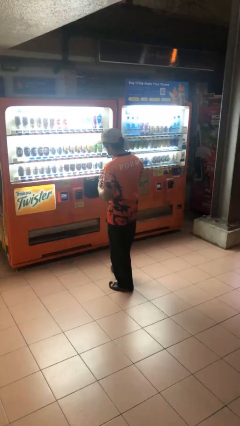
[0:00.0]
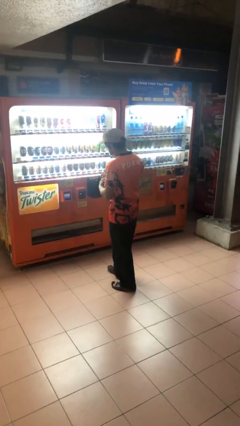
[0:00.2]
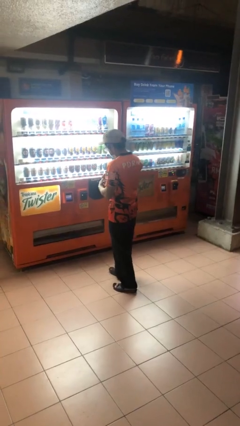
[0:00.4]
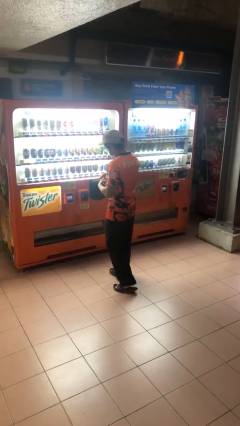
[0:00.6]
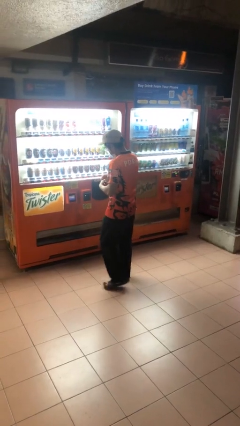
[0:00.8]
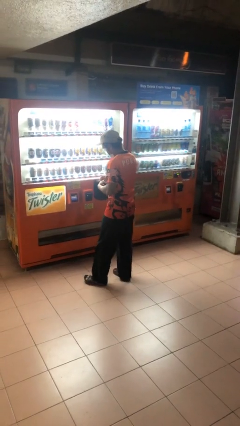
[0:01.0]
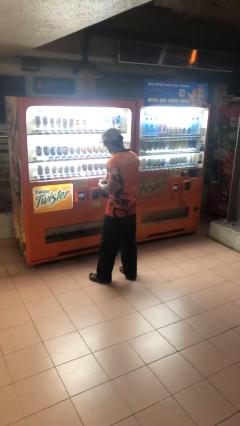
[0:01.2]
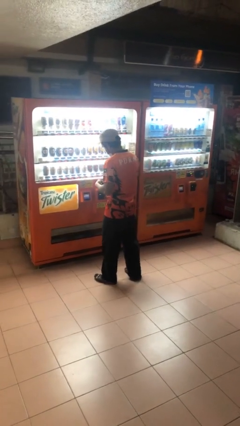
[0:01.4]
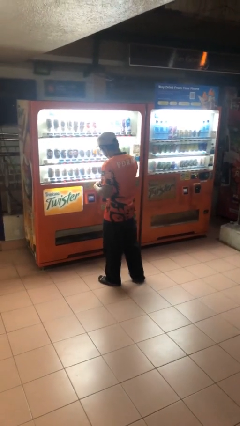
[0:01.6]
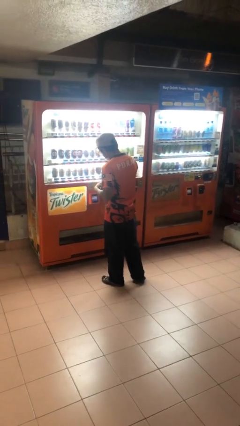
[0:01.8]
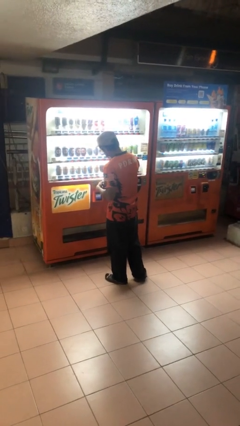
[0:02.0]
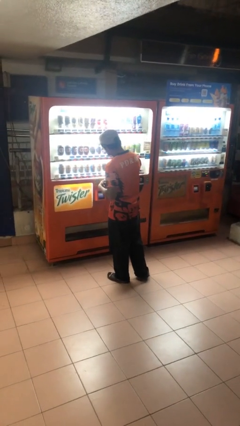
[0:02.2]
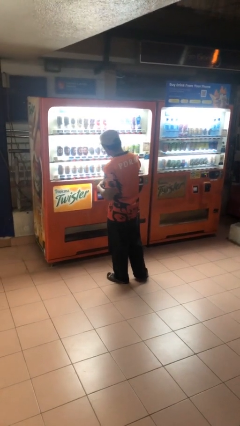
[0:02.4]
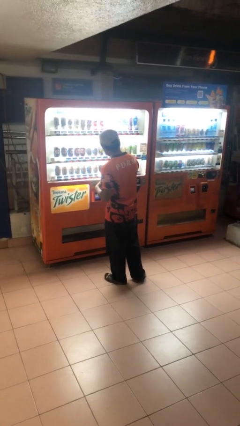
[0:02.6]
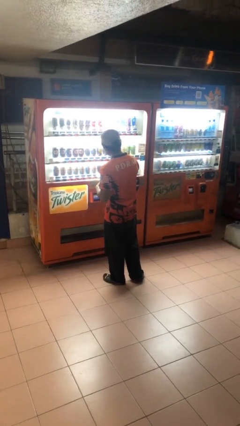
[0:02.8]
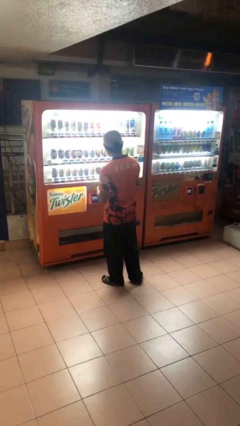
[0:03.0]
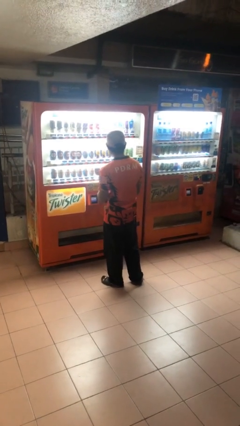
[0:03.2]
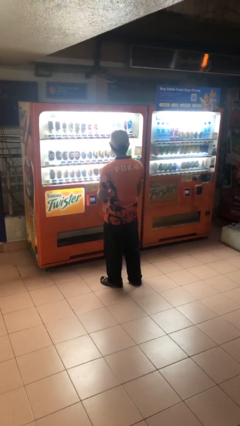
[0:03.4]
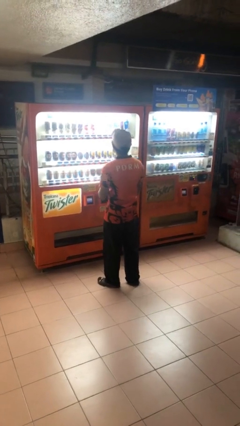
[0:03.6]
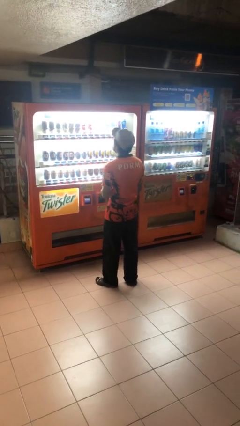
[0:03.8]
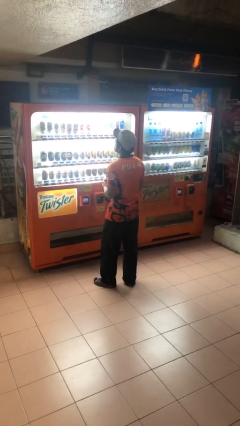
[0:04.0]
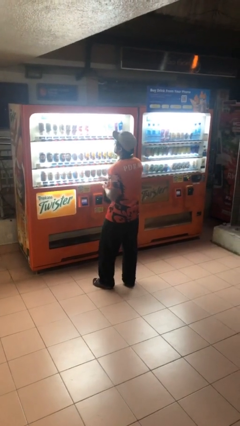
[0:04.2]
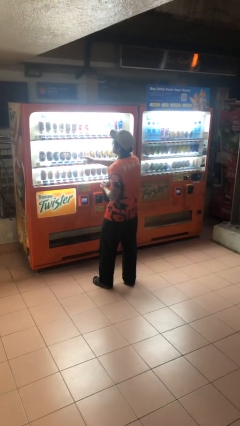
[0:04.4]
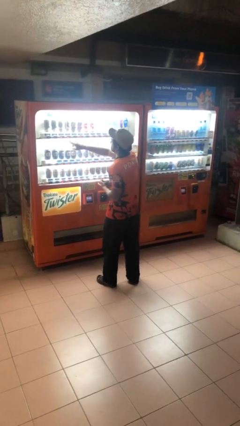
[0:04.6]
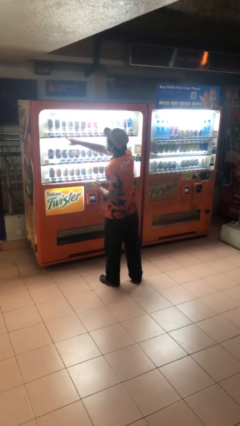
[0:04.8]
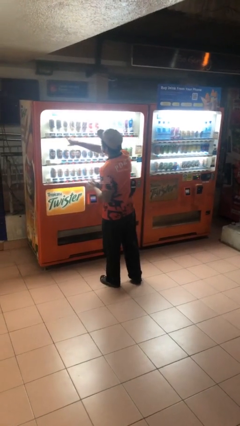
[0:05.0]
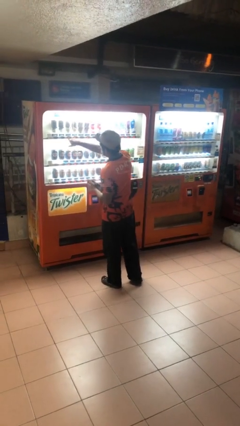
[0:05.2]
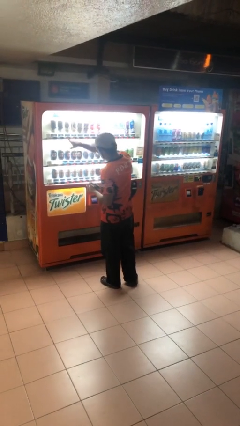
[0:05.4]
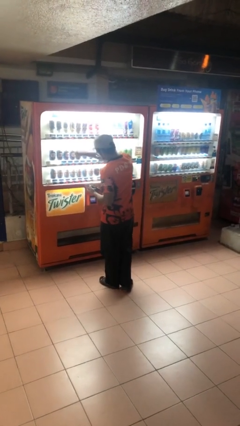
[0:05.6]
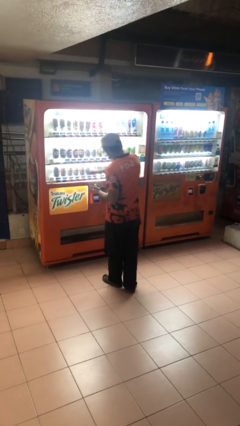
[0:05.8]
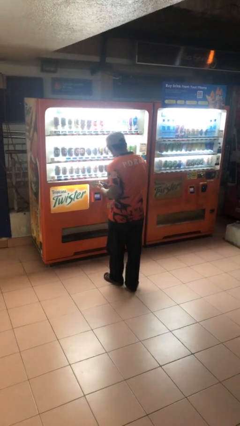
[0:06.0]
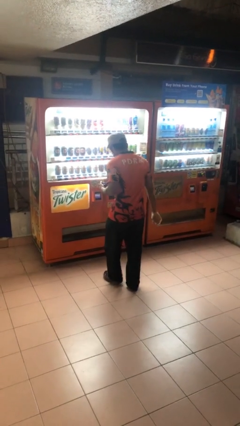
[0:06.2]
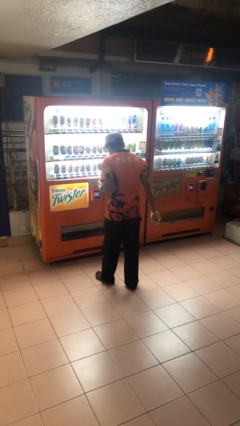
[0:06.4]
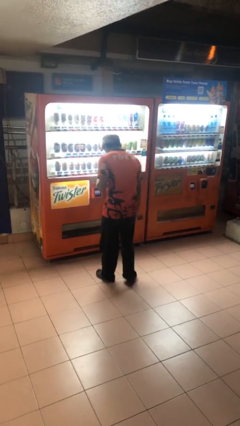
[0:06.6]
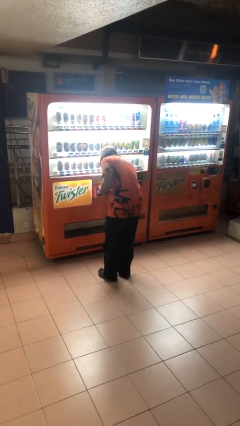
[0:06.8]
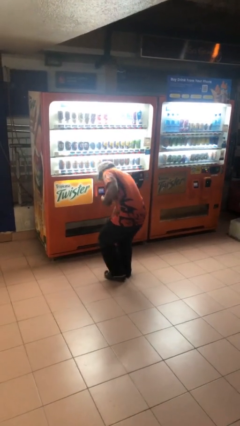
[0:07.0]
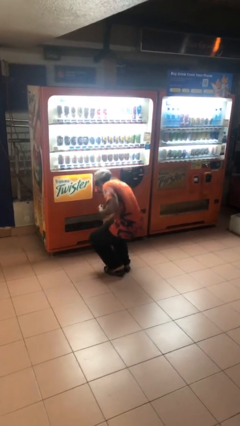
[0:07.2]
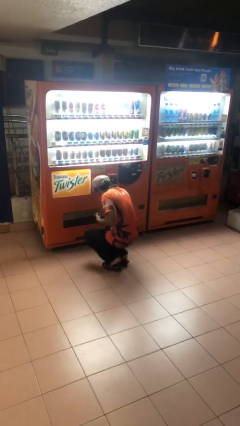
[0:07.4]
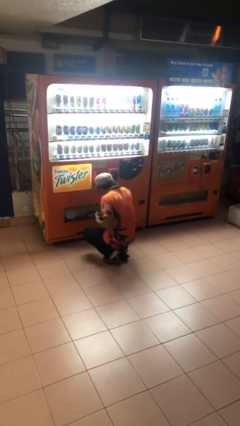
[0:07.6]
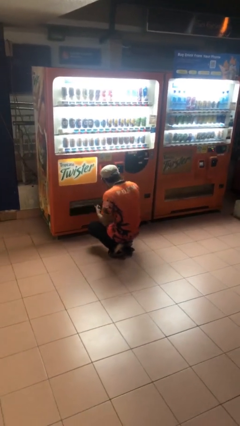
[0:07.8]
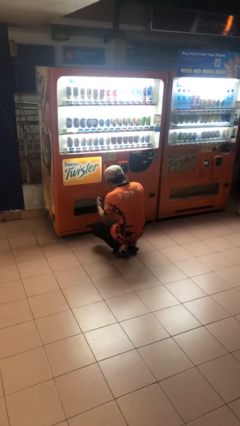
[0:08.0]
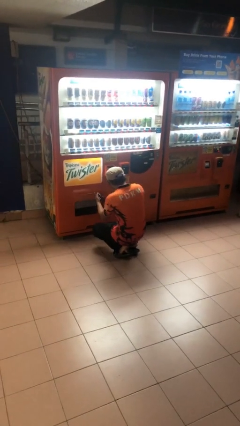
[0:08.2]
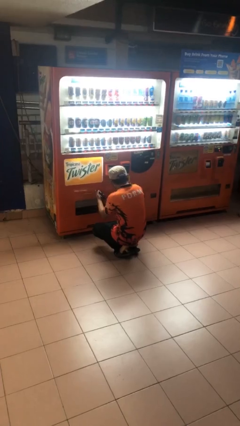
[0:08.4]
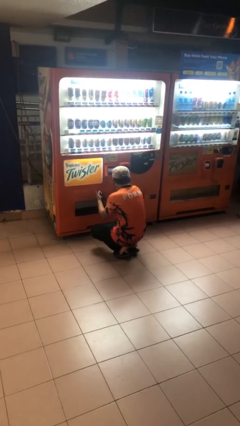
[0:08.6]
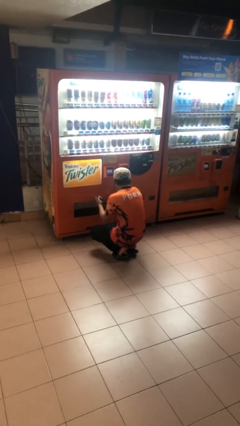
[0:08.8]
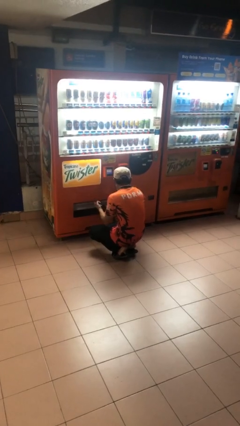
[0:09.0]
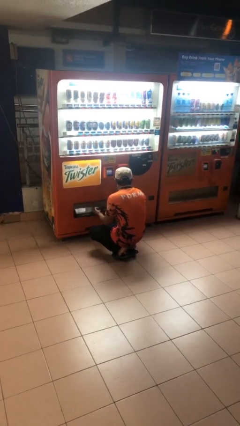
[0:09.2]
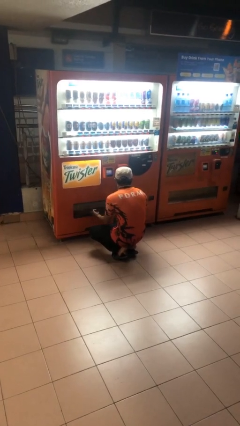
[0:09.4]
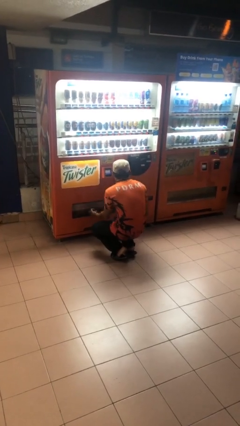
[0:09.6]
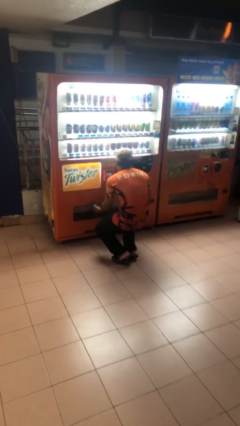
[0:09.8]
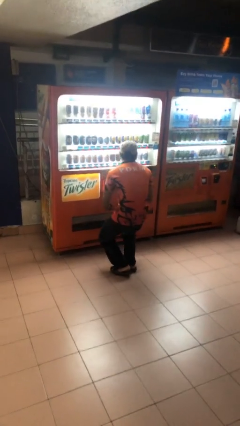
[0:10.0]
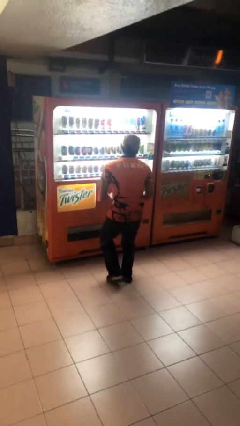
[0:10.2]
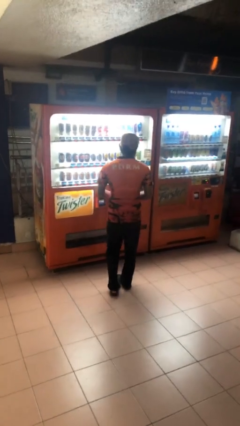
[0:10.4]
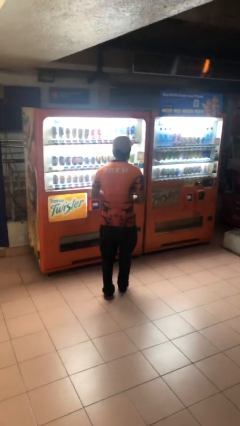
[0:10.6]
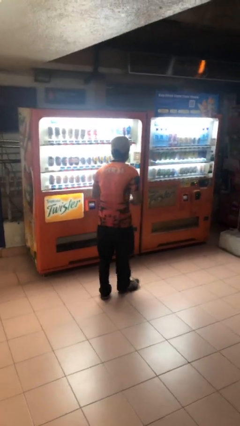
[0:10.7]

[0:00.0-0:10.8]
person purchases from machine

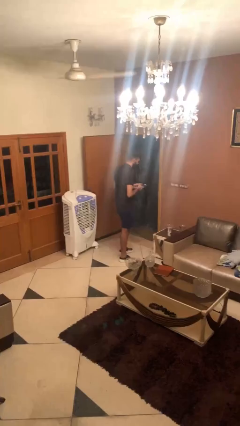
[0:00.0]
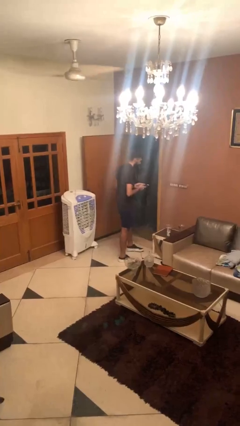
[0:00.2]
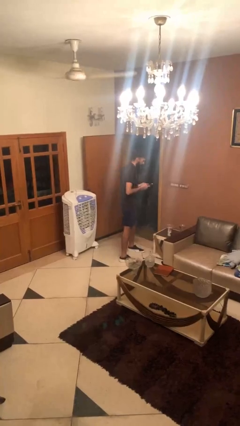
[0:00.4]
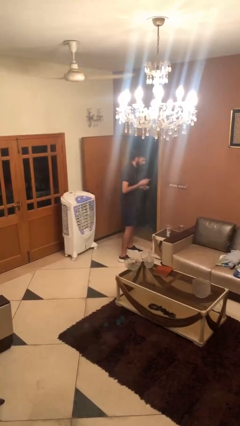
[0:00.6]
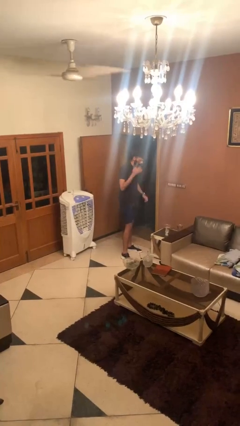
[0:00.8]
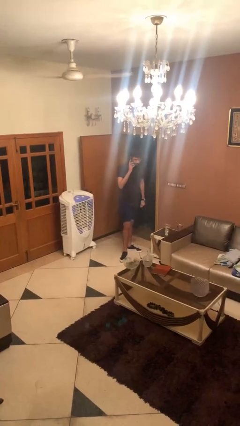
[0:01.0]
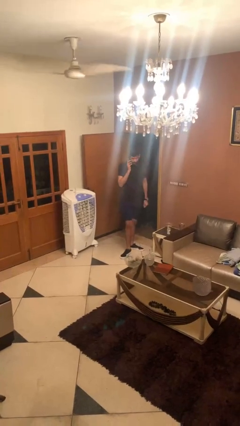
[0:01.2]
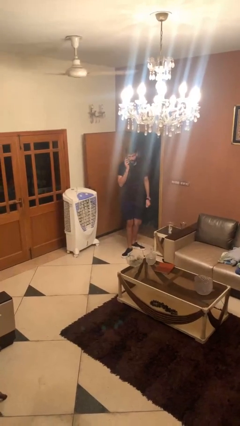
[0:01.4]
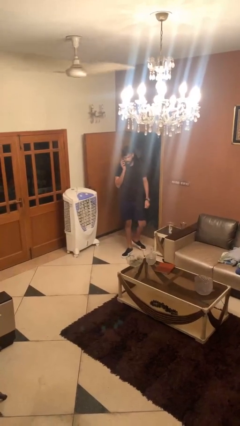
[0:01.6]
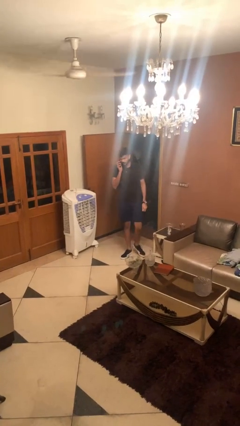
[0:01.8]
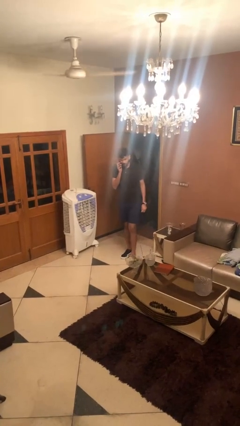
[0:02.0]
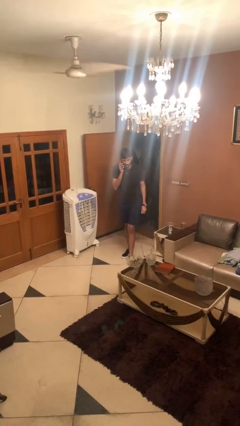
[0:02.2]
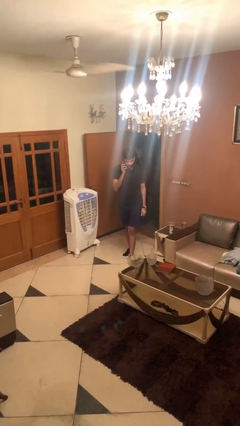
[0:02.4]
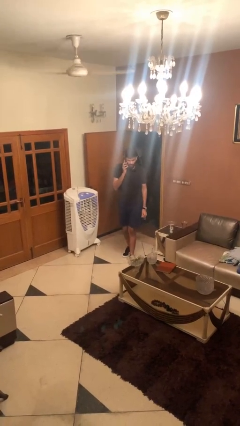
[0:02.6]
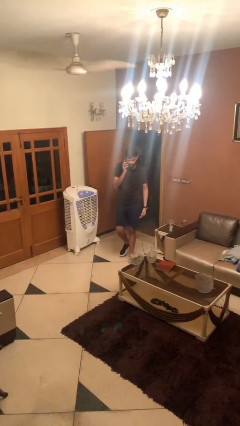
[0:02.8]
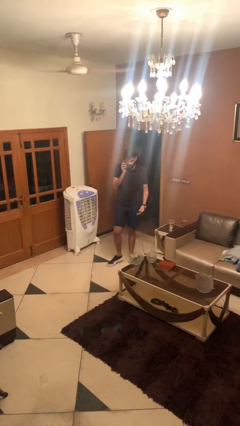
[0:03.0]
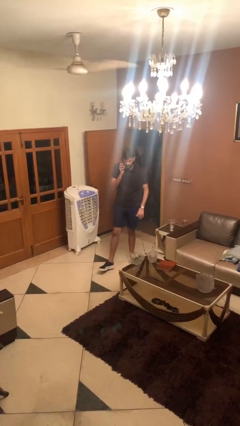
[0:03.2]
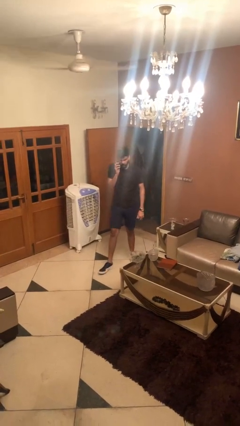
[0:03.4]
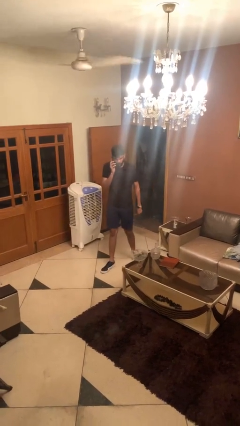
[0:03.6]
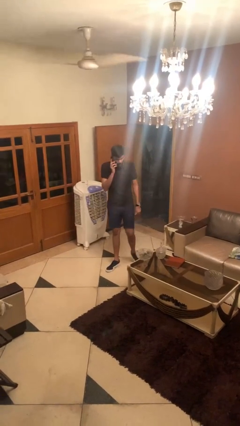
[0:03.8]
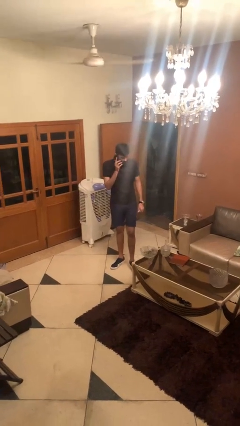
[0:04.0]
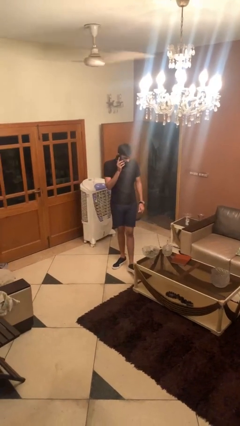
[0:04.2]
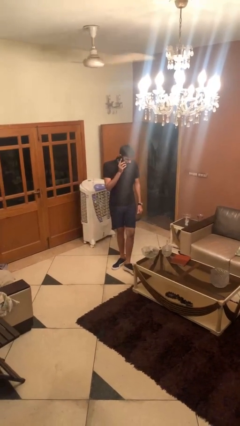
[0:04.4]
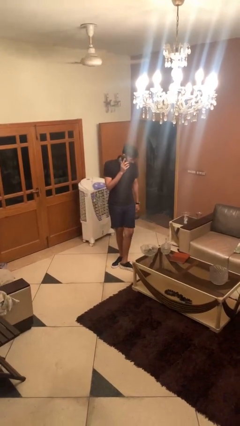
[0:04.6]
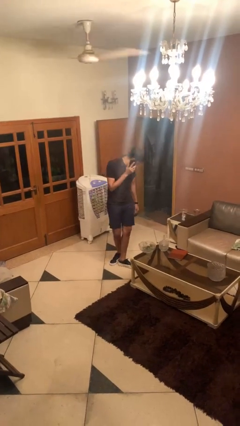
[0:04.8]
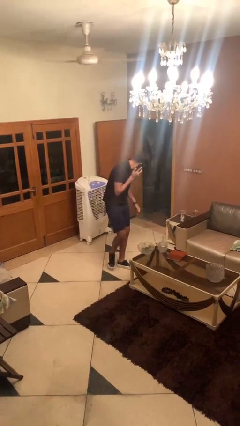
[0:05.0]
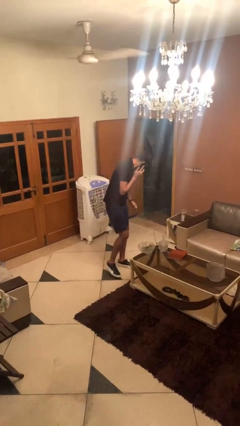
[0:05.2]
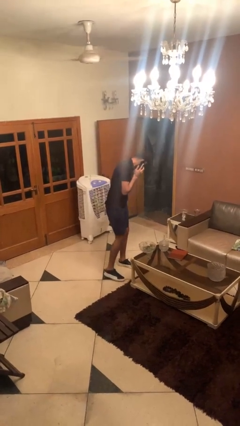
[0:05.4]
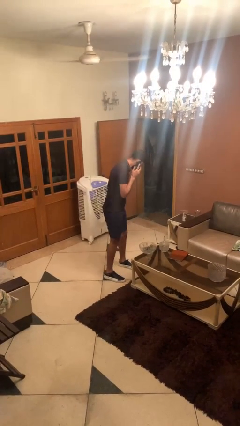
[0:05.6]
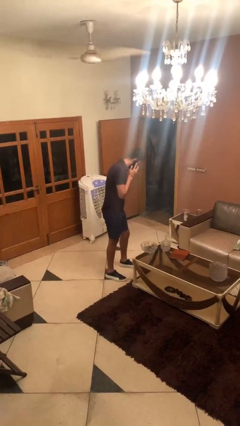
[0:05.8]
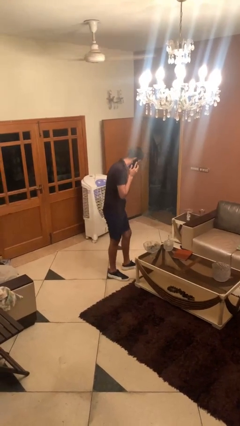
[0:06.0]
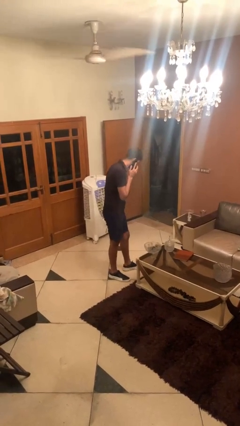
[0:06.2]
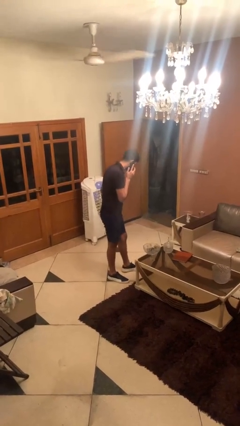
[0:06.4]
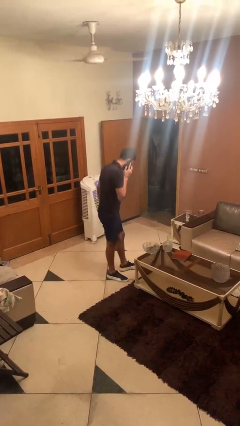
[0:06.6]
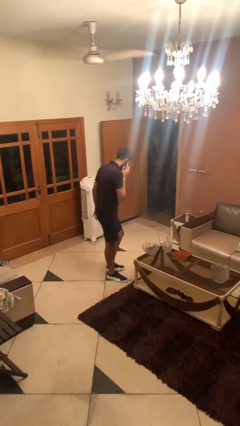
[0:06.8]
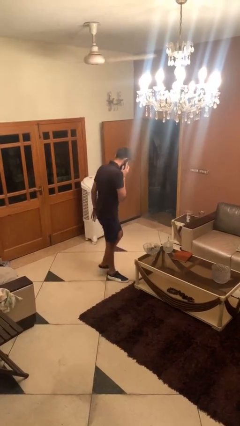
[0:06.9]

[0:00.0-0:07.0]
person talks on phone
